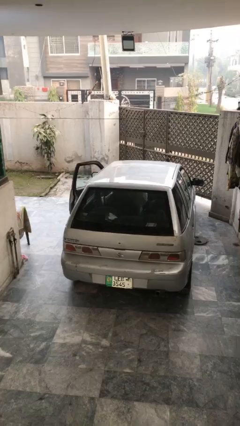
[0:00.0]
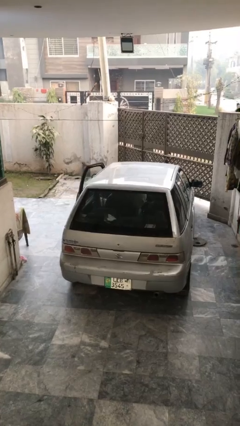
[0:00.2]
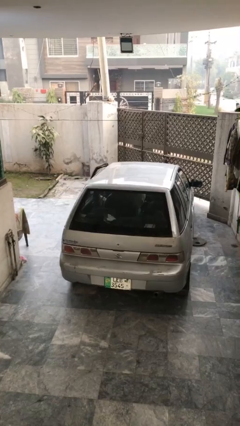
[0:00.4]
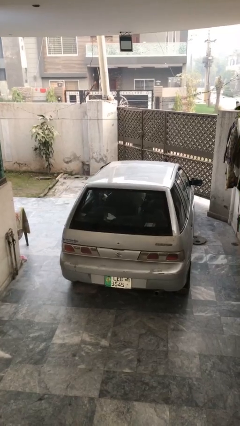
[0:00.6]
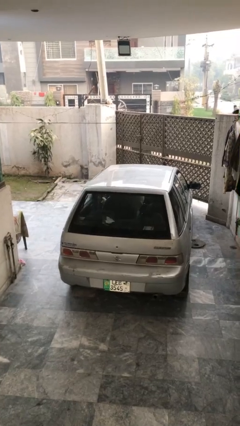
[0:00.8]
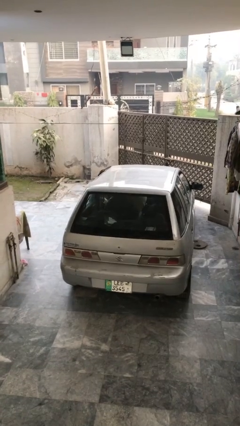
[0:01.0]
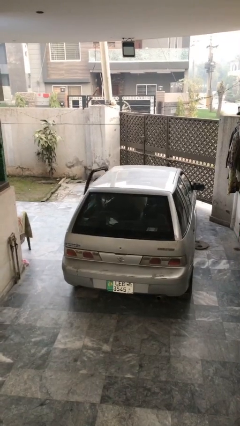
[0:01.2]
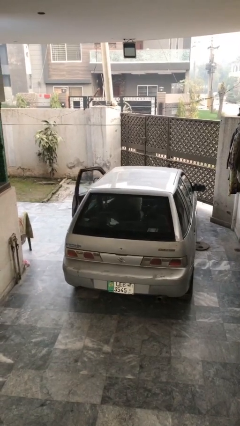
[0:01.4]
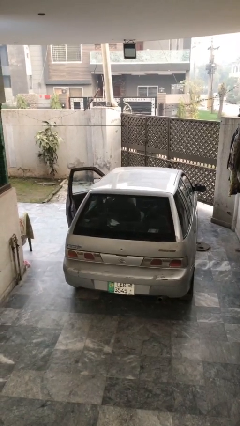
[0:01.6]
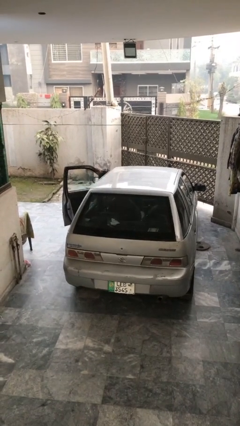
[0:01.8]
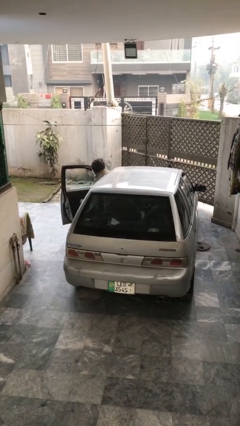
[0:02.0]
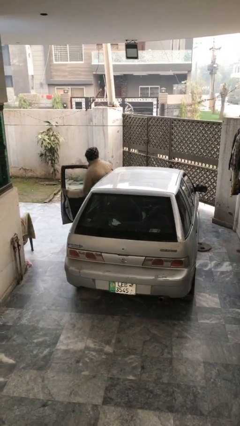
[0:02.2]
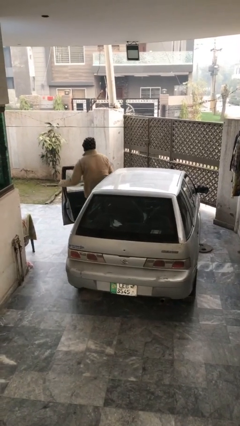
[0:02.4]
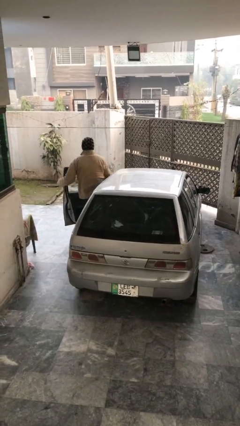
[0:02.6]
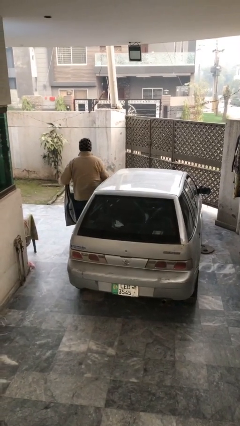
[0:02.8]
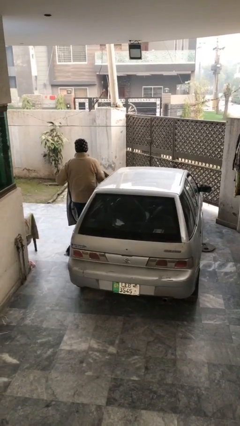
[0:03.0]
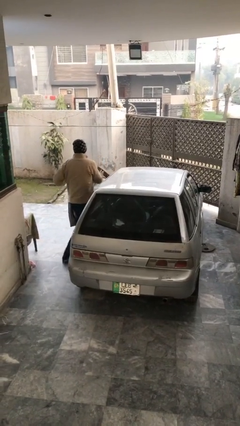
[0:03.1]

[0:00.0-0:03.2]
car drops off person

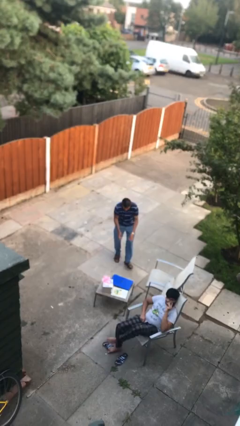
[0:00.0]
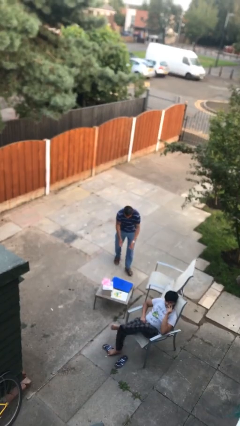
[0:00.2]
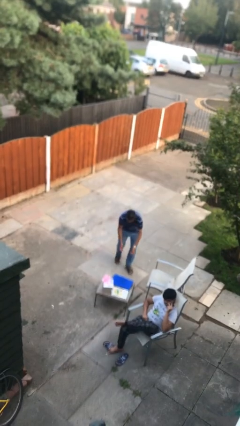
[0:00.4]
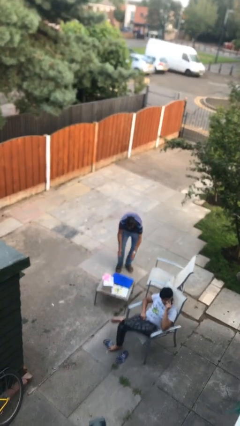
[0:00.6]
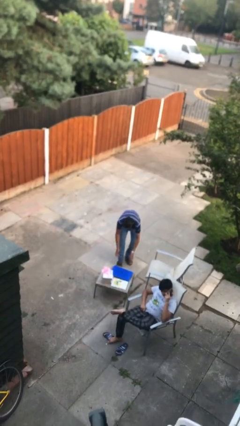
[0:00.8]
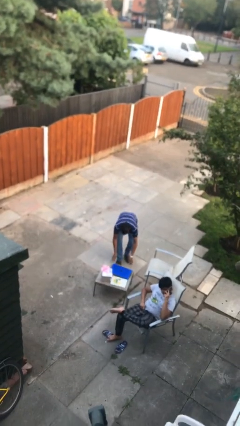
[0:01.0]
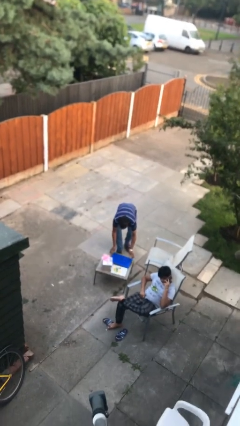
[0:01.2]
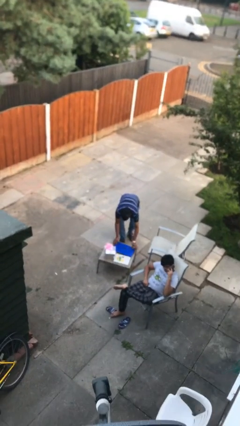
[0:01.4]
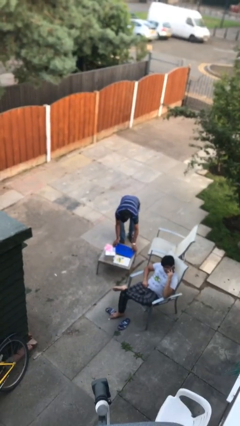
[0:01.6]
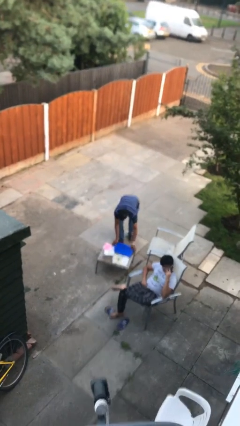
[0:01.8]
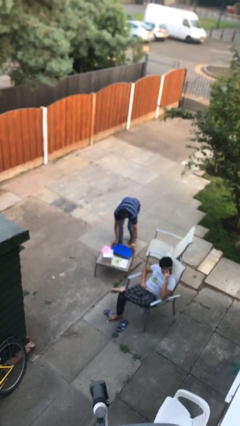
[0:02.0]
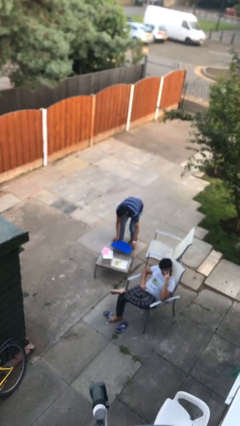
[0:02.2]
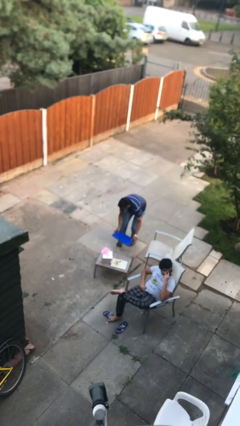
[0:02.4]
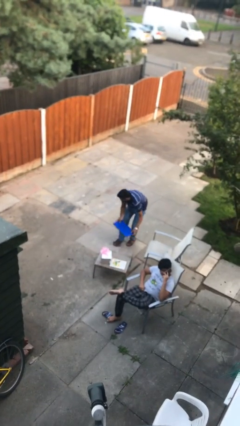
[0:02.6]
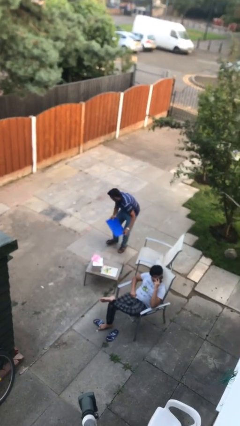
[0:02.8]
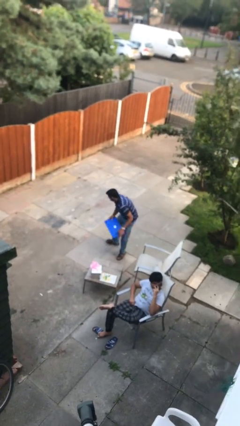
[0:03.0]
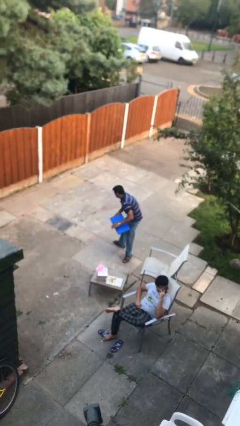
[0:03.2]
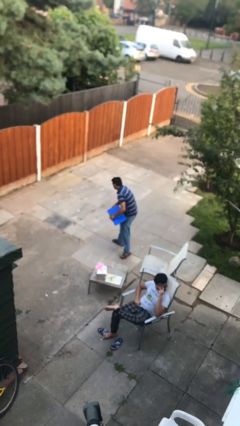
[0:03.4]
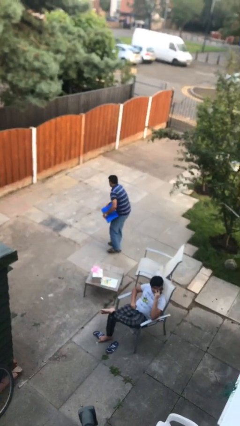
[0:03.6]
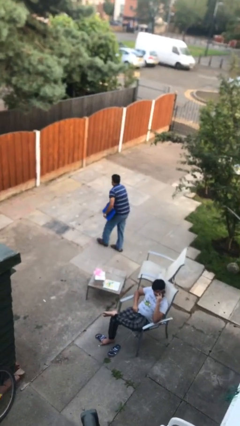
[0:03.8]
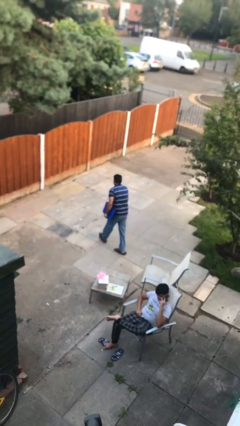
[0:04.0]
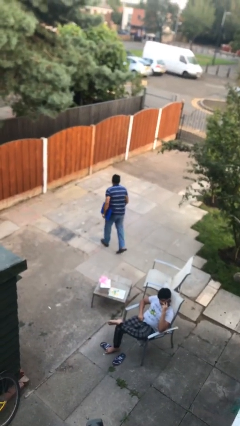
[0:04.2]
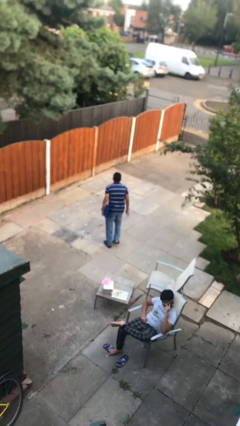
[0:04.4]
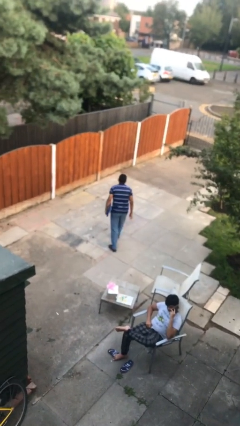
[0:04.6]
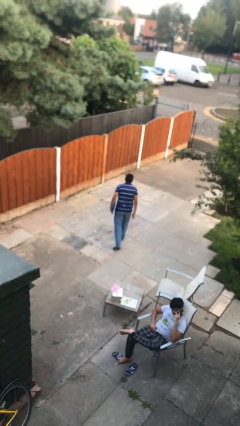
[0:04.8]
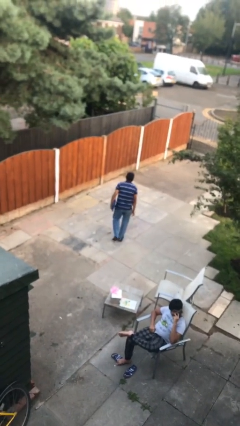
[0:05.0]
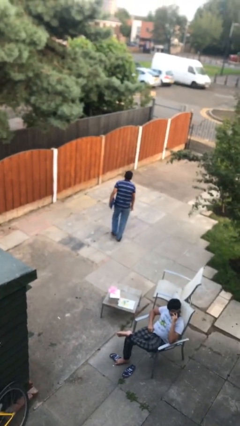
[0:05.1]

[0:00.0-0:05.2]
person steals object from person

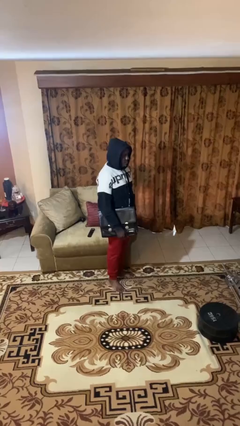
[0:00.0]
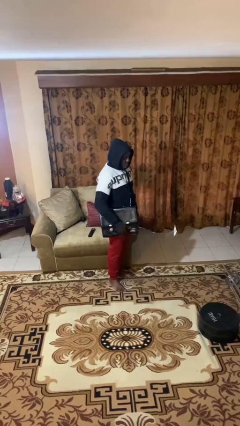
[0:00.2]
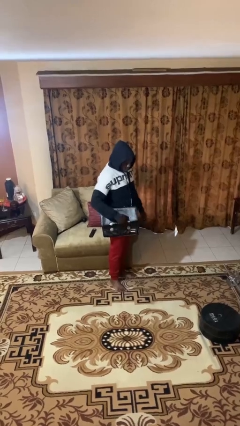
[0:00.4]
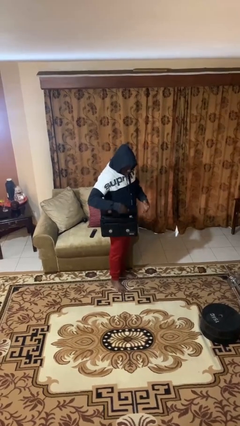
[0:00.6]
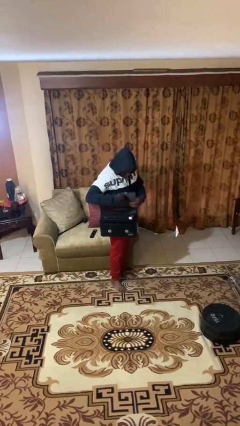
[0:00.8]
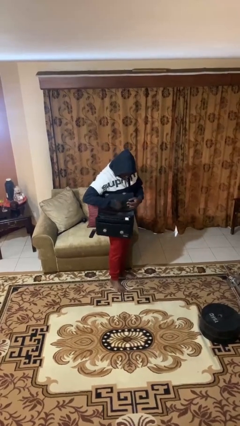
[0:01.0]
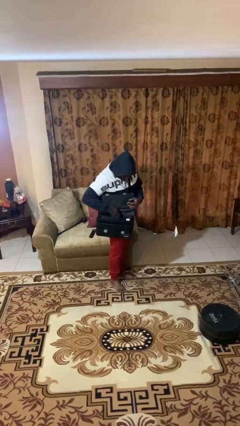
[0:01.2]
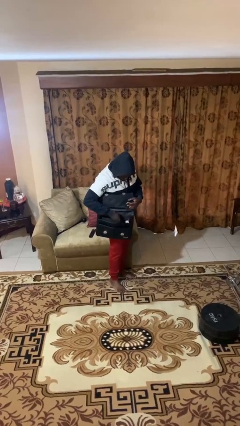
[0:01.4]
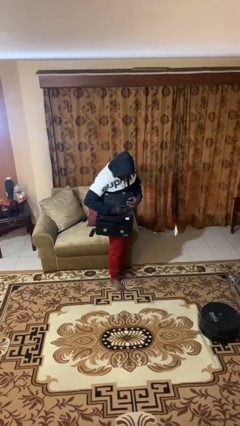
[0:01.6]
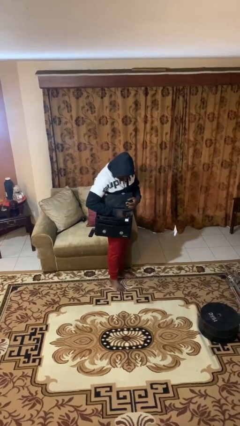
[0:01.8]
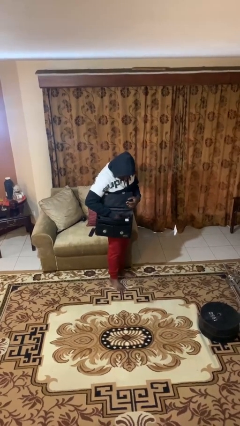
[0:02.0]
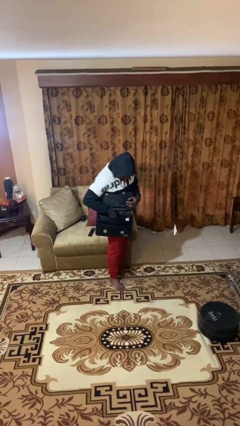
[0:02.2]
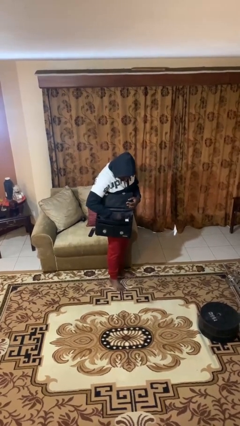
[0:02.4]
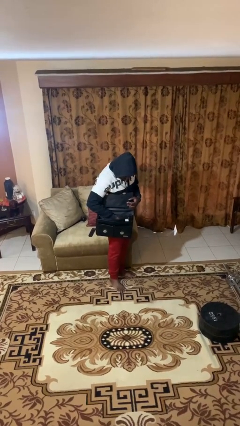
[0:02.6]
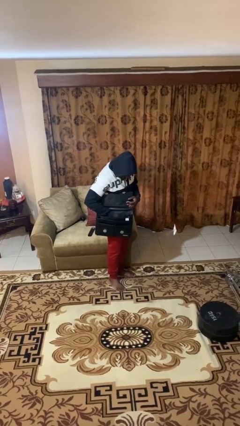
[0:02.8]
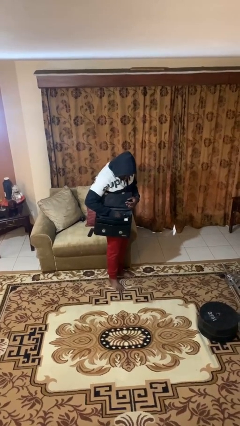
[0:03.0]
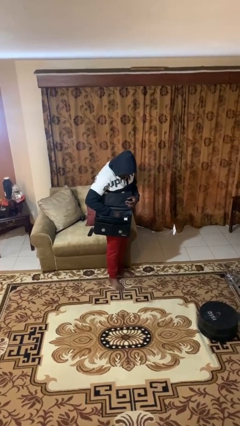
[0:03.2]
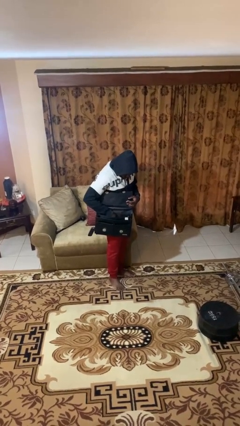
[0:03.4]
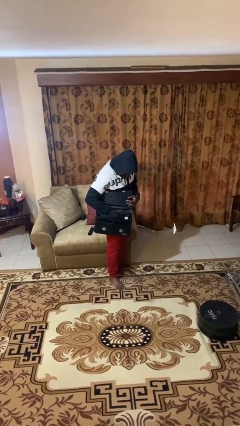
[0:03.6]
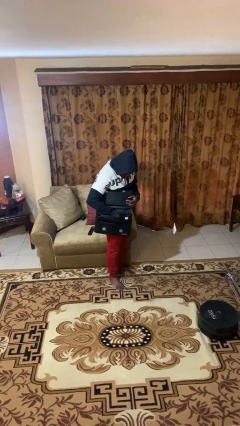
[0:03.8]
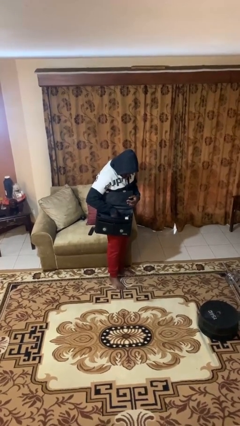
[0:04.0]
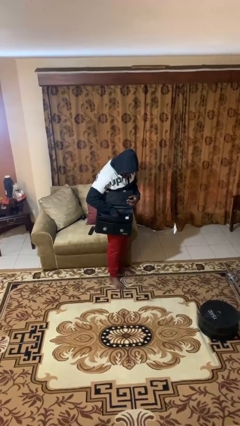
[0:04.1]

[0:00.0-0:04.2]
person searches in purse

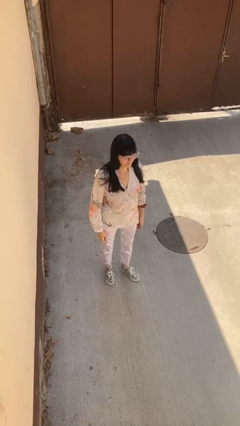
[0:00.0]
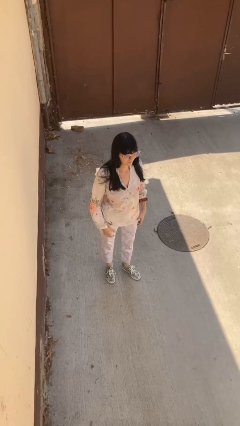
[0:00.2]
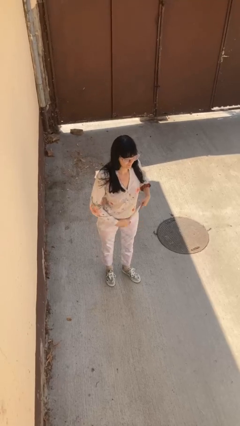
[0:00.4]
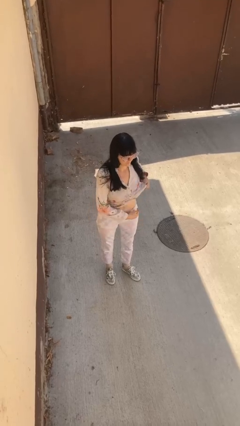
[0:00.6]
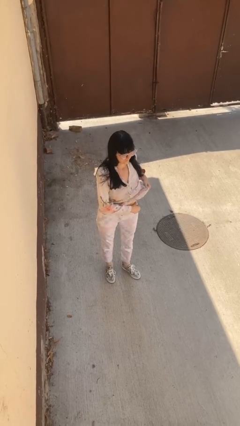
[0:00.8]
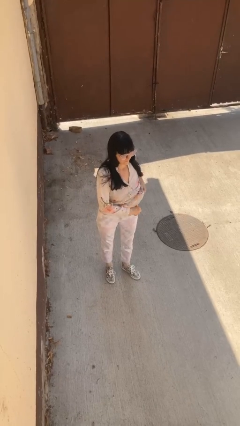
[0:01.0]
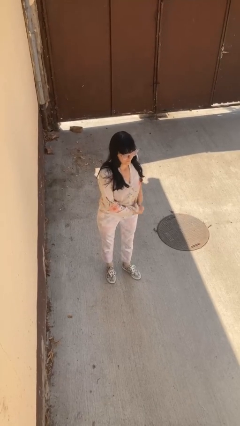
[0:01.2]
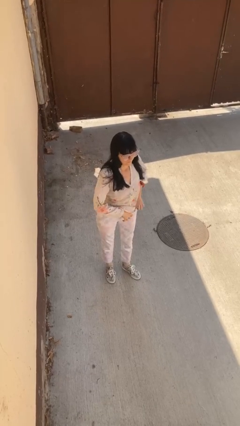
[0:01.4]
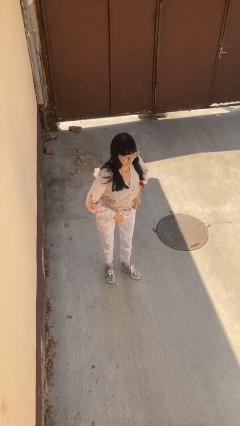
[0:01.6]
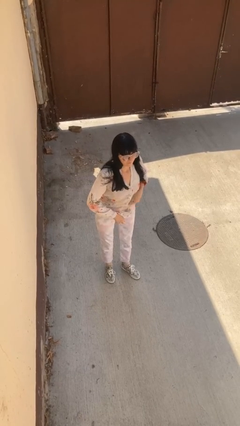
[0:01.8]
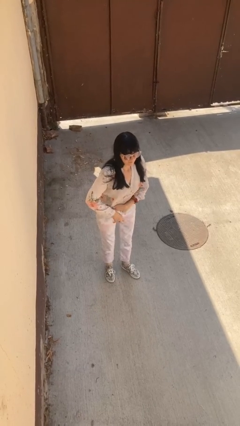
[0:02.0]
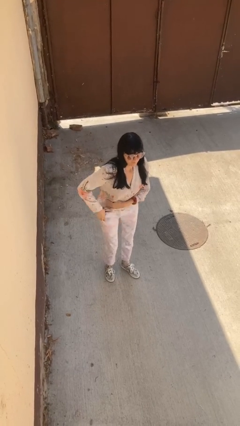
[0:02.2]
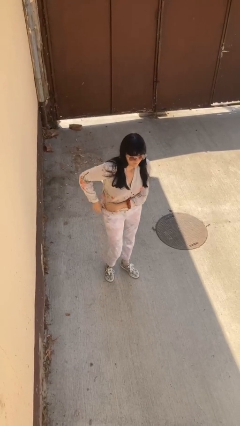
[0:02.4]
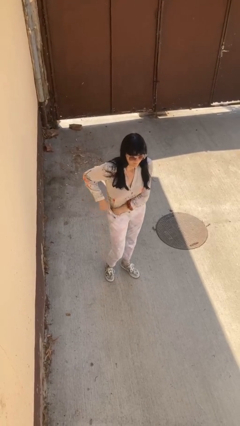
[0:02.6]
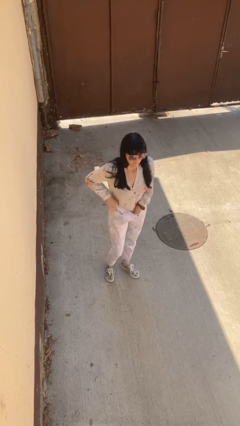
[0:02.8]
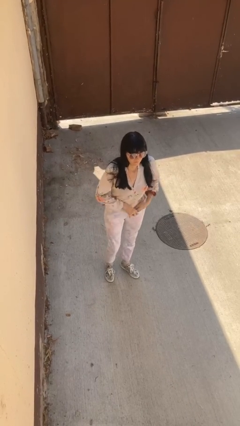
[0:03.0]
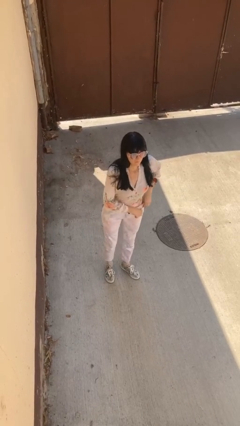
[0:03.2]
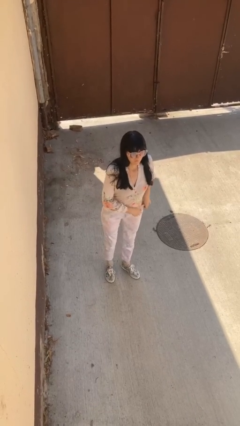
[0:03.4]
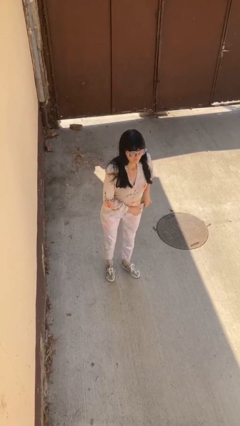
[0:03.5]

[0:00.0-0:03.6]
person tucks in shirt

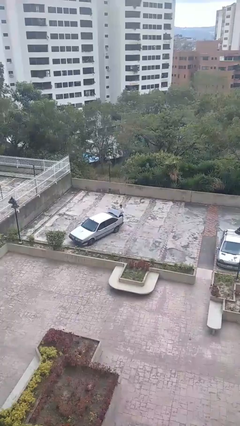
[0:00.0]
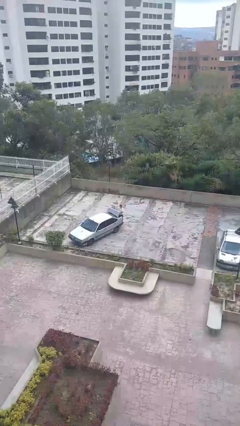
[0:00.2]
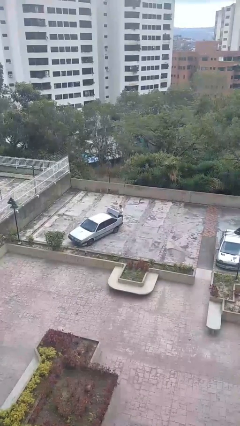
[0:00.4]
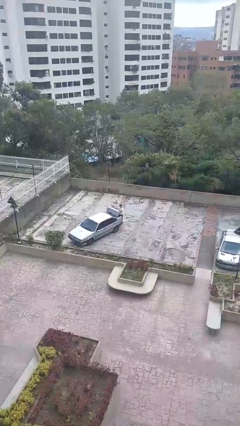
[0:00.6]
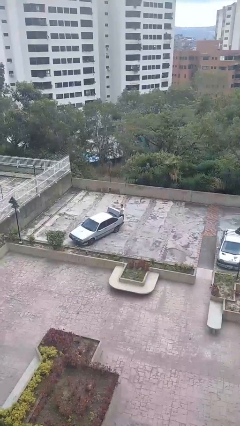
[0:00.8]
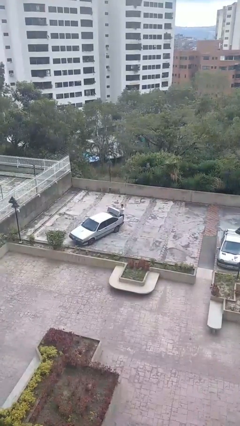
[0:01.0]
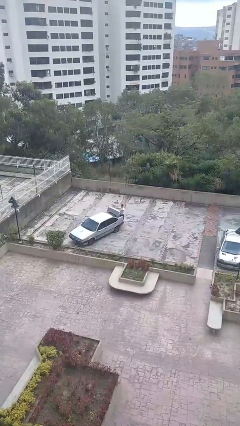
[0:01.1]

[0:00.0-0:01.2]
person opens car trunk
